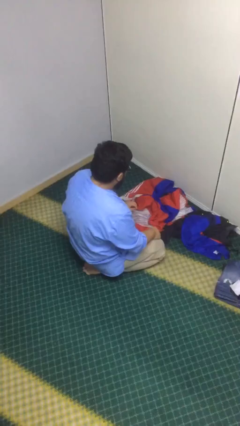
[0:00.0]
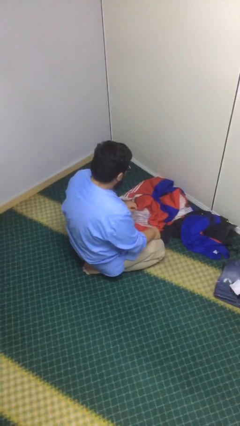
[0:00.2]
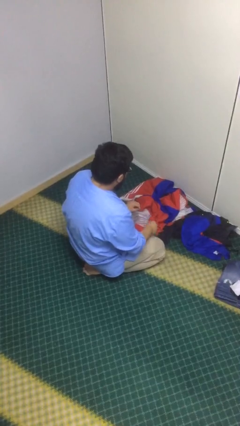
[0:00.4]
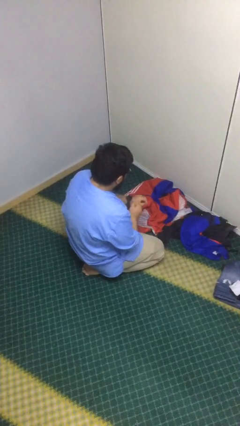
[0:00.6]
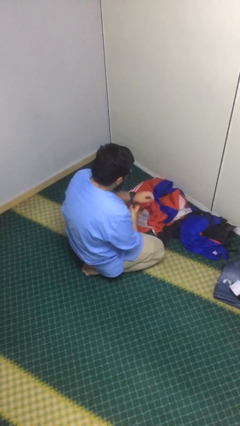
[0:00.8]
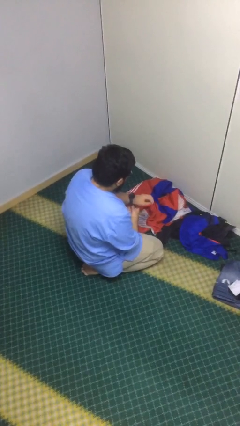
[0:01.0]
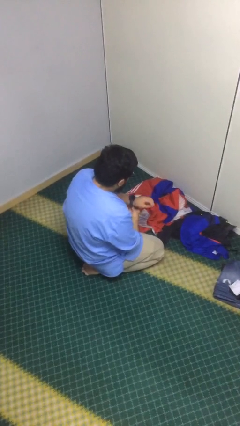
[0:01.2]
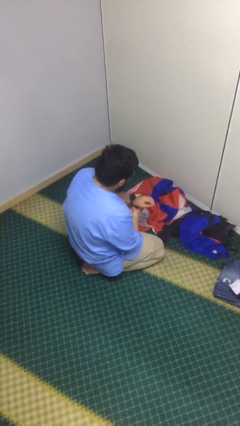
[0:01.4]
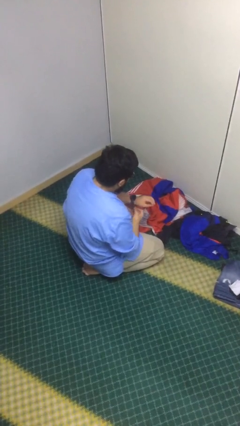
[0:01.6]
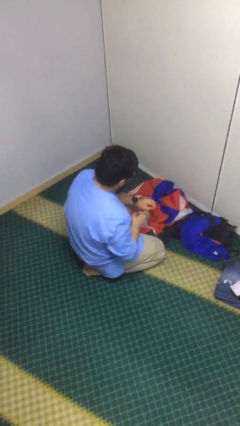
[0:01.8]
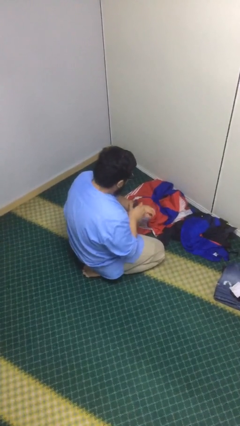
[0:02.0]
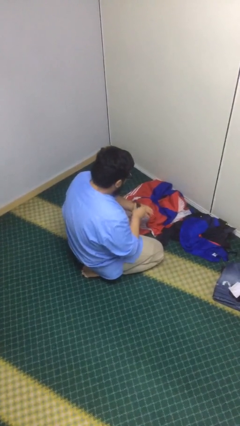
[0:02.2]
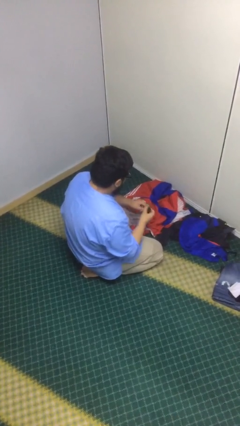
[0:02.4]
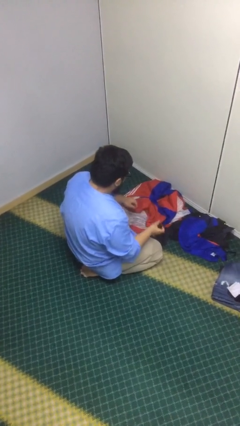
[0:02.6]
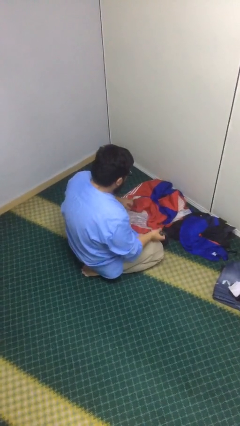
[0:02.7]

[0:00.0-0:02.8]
person takes off wristwatch

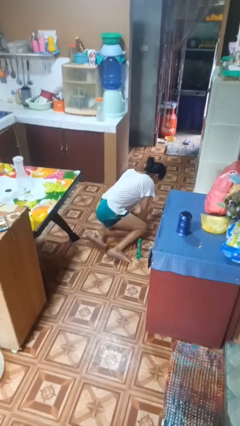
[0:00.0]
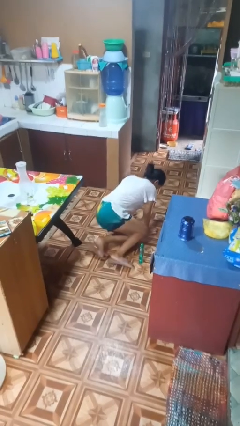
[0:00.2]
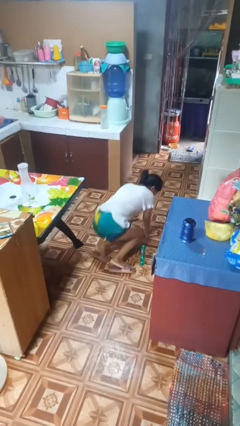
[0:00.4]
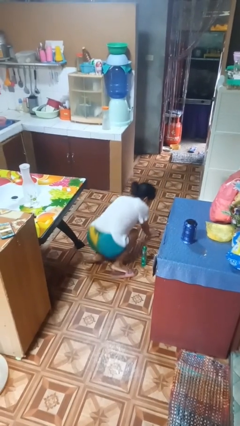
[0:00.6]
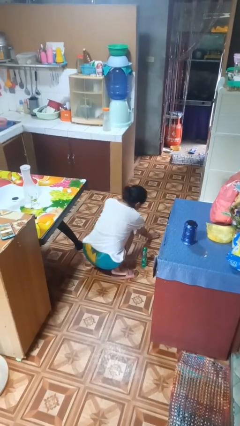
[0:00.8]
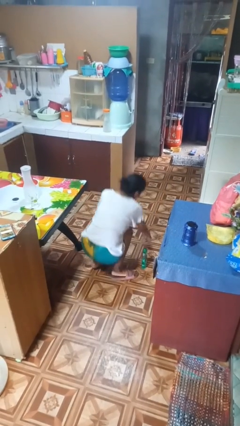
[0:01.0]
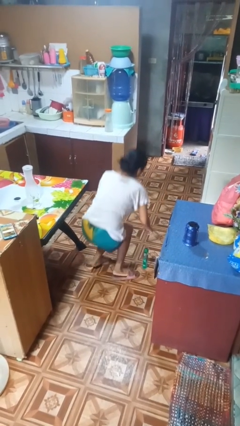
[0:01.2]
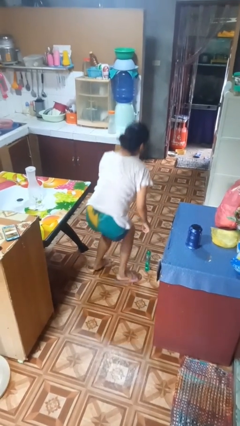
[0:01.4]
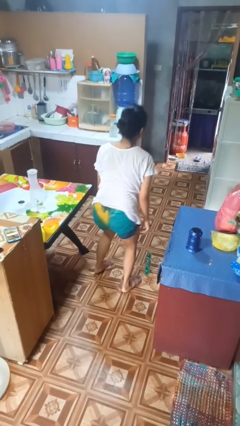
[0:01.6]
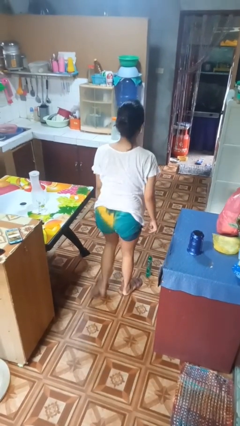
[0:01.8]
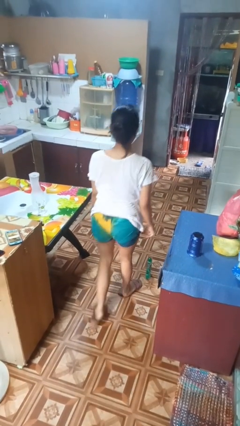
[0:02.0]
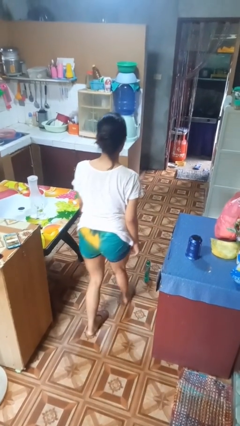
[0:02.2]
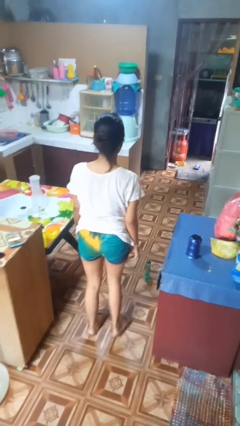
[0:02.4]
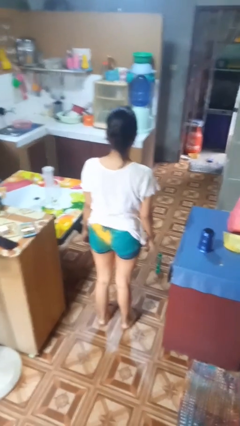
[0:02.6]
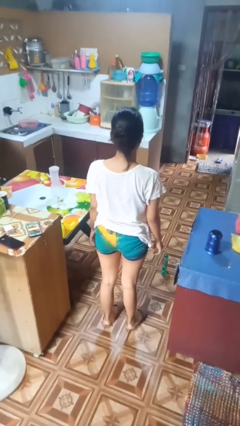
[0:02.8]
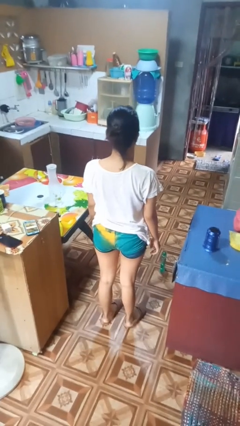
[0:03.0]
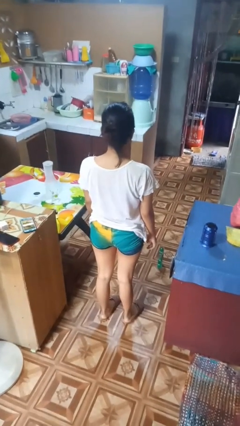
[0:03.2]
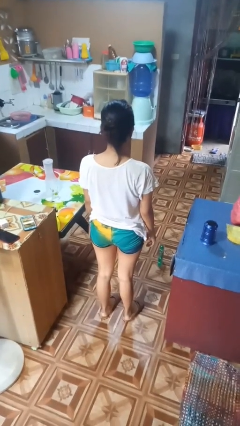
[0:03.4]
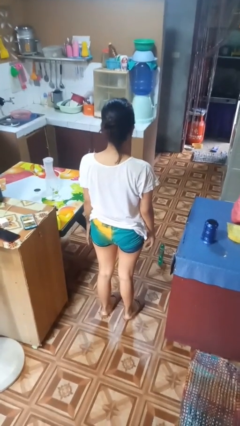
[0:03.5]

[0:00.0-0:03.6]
person stands up from floor

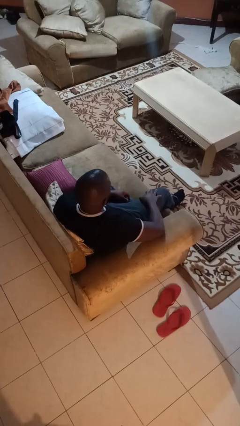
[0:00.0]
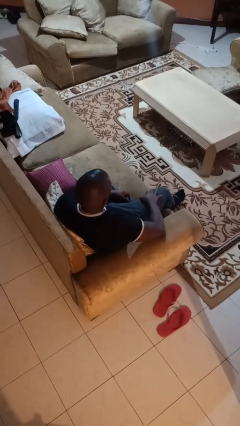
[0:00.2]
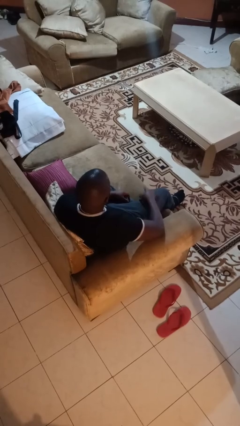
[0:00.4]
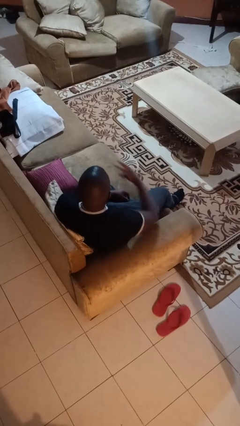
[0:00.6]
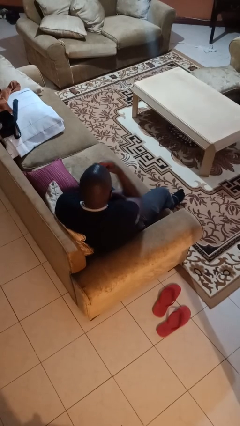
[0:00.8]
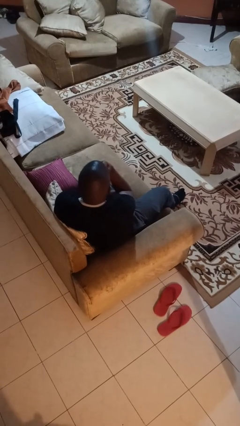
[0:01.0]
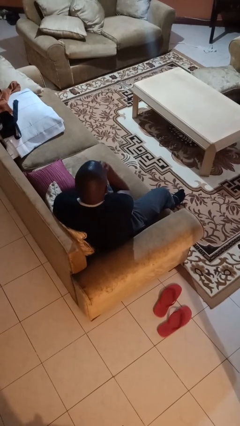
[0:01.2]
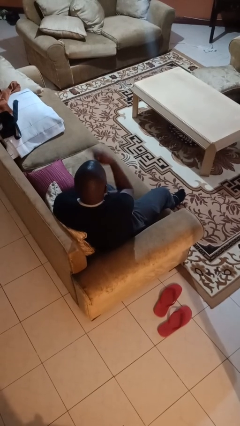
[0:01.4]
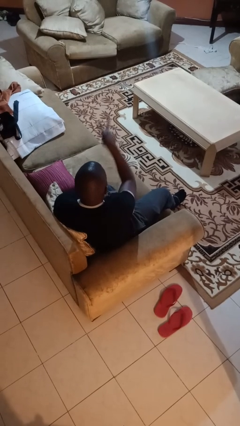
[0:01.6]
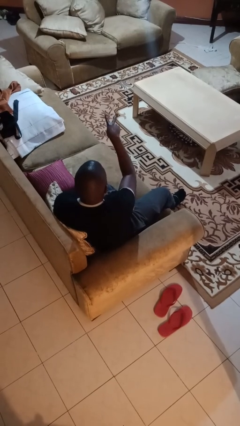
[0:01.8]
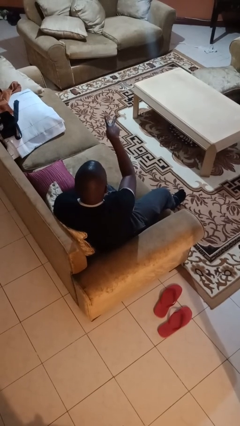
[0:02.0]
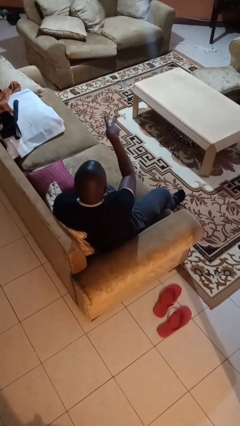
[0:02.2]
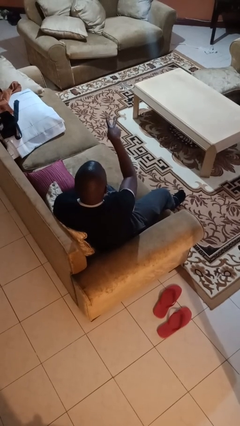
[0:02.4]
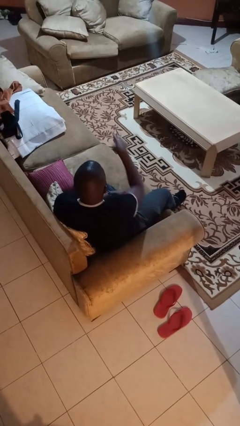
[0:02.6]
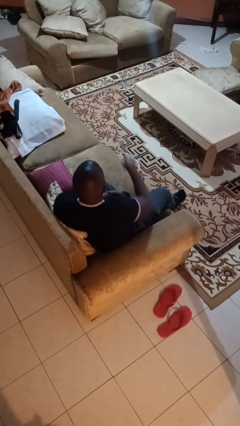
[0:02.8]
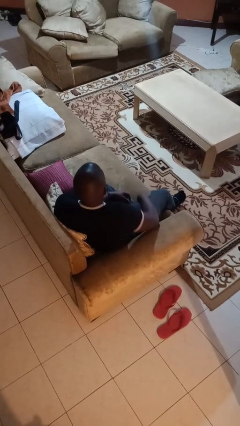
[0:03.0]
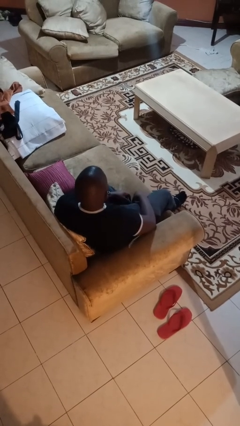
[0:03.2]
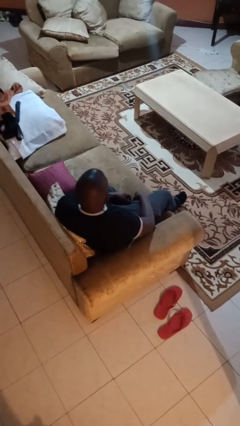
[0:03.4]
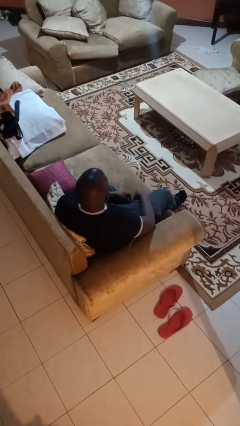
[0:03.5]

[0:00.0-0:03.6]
person gestures watch closely

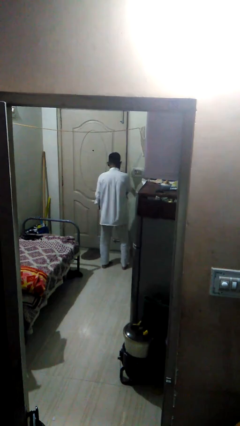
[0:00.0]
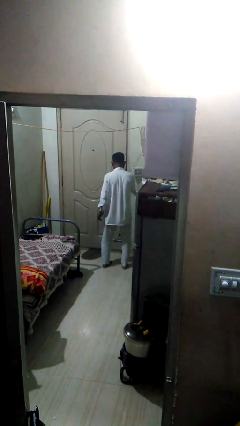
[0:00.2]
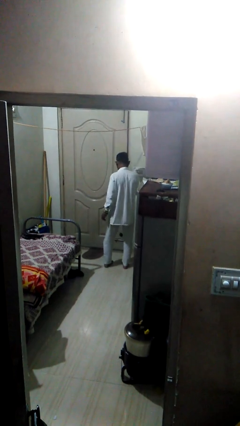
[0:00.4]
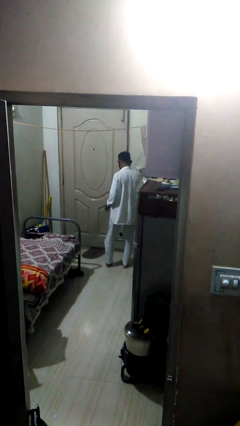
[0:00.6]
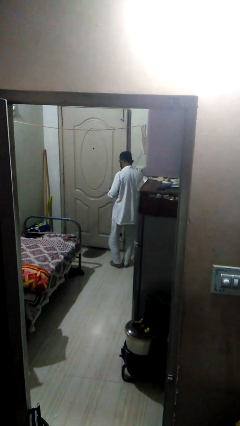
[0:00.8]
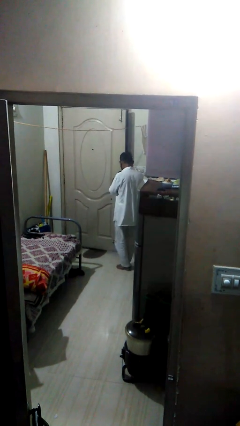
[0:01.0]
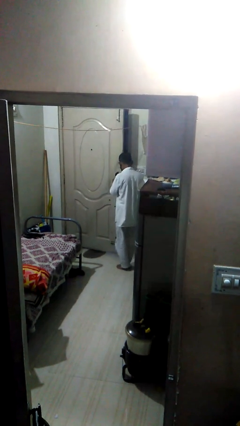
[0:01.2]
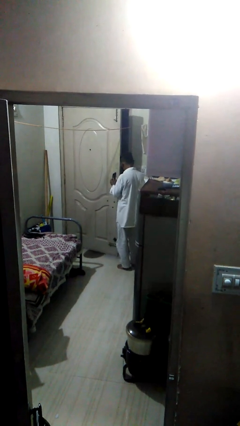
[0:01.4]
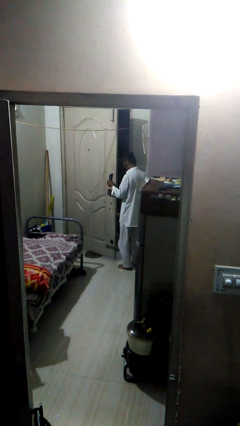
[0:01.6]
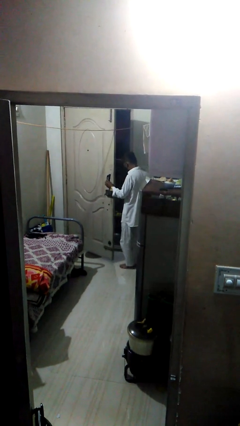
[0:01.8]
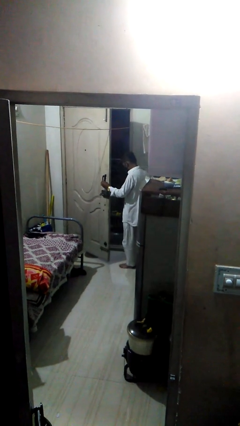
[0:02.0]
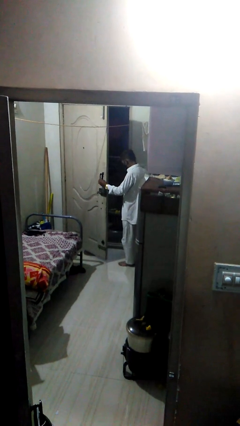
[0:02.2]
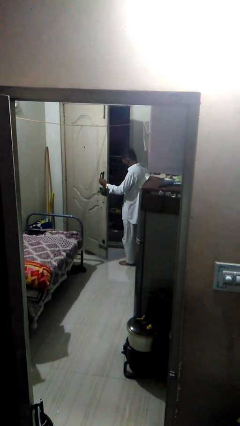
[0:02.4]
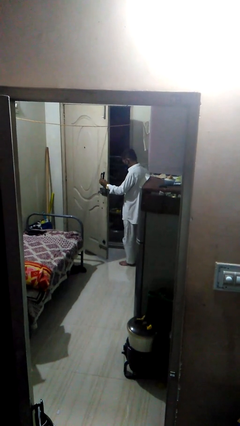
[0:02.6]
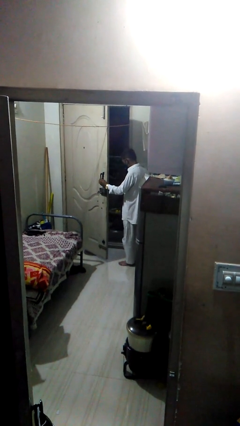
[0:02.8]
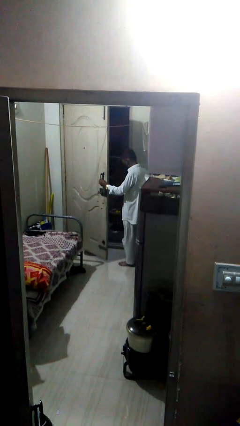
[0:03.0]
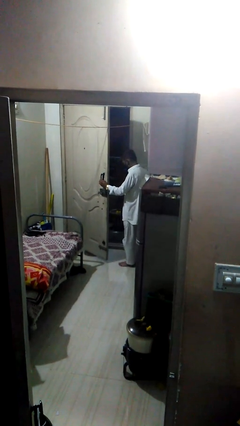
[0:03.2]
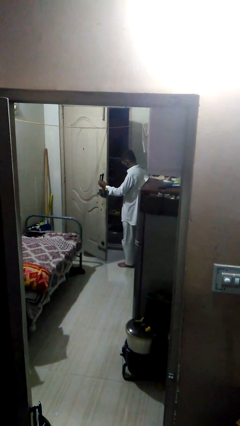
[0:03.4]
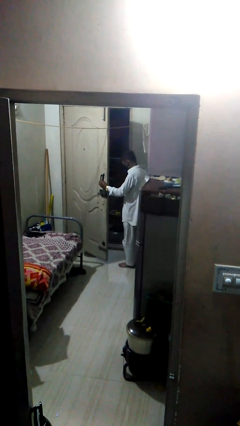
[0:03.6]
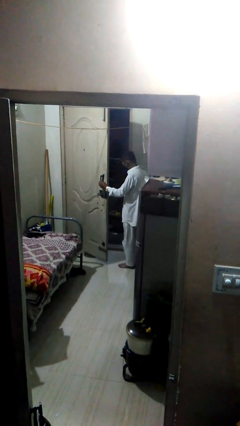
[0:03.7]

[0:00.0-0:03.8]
person opens facility door

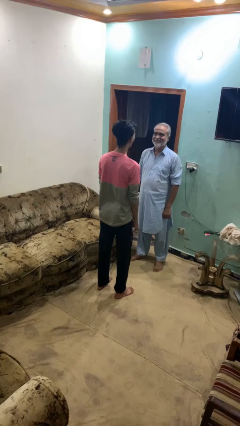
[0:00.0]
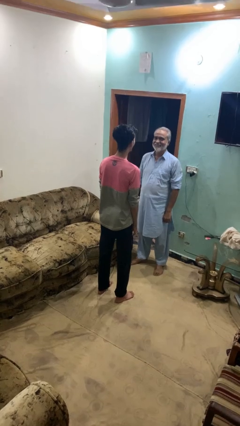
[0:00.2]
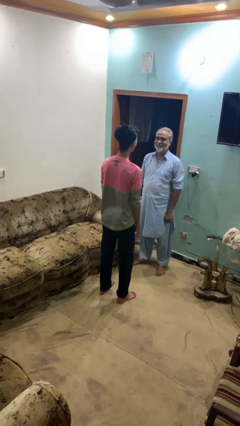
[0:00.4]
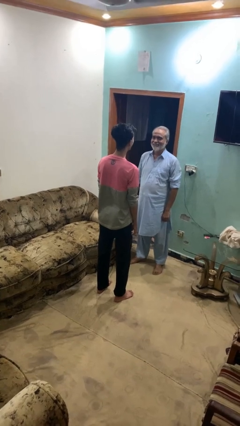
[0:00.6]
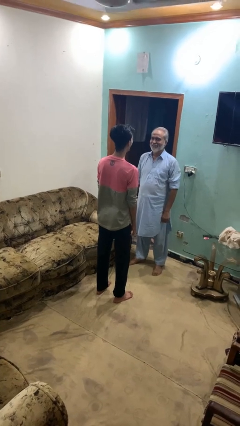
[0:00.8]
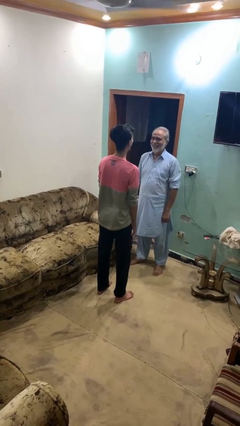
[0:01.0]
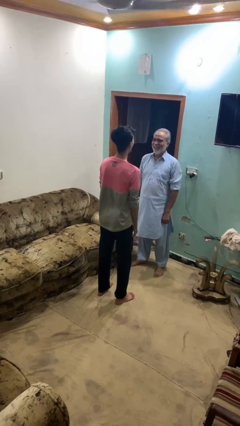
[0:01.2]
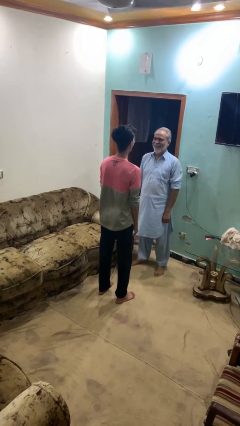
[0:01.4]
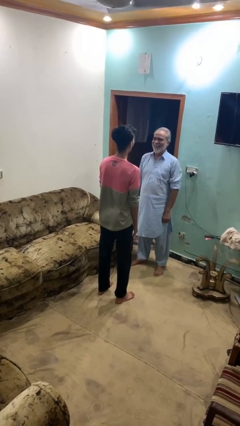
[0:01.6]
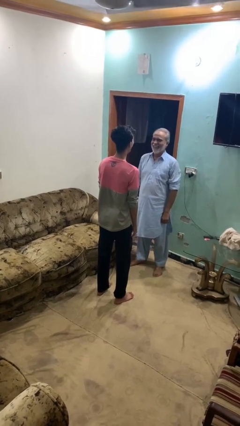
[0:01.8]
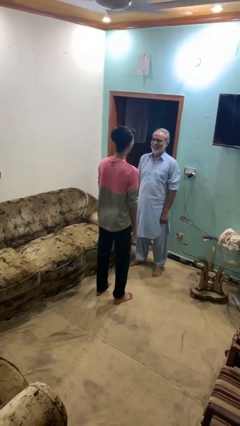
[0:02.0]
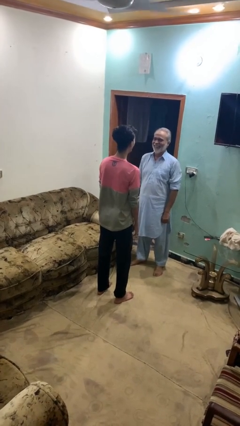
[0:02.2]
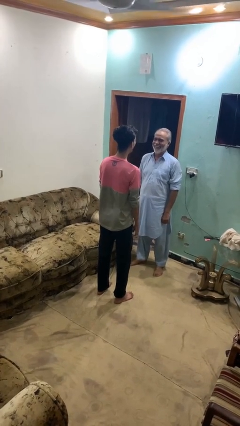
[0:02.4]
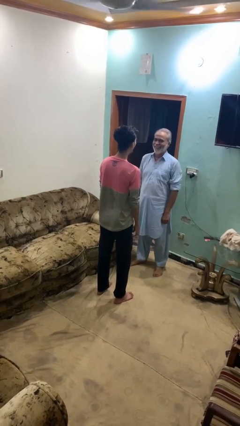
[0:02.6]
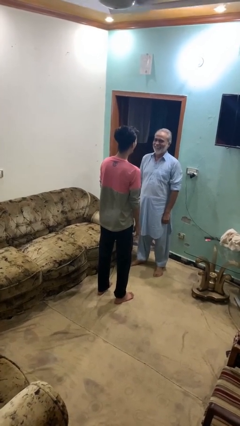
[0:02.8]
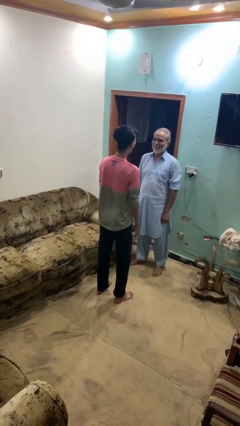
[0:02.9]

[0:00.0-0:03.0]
person laughs with person

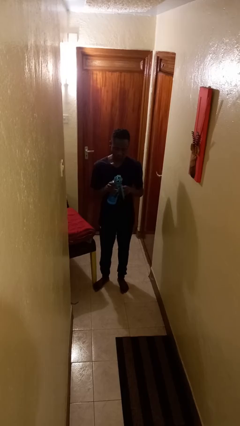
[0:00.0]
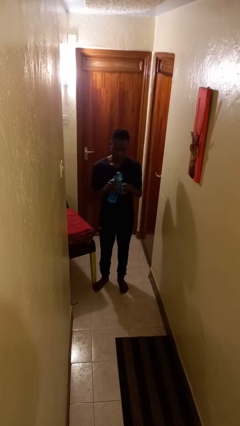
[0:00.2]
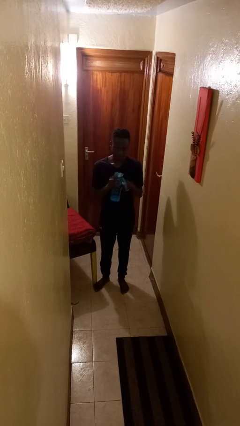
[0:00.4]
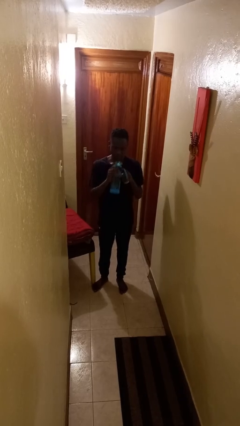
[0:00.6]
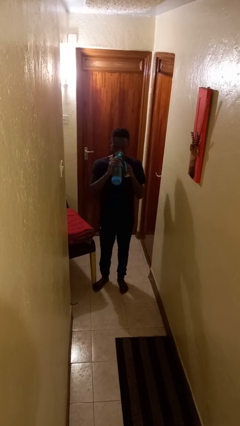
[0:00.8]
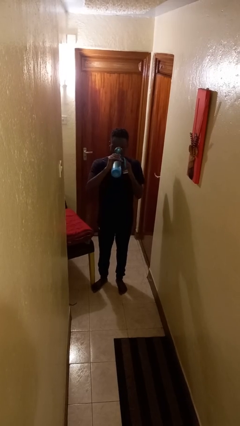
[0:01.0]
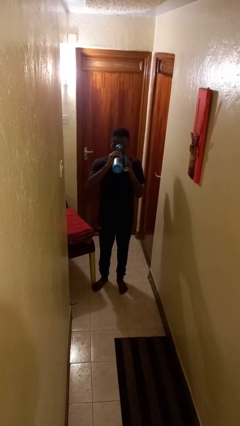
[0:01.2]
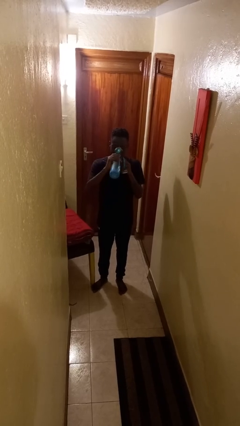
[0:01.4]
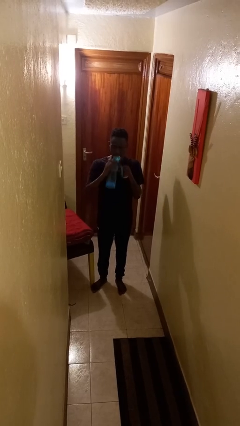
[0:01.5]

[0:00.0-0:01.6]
person drinks from cup
